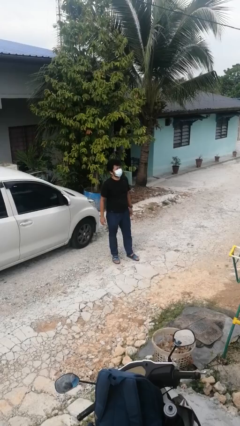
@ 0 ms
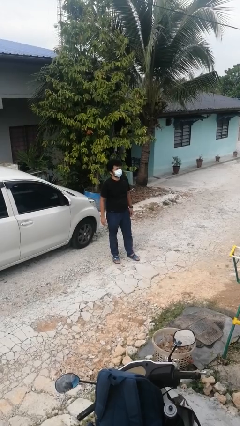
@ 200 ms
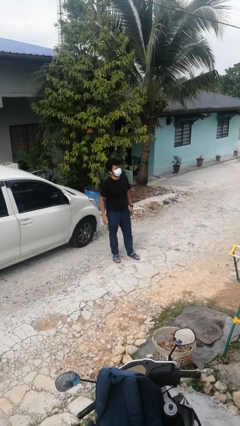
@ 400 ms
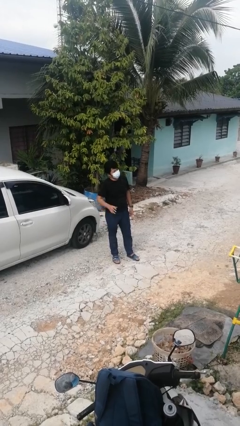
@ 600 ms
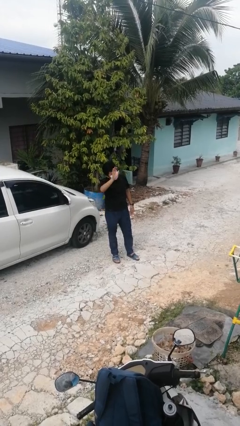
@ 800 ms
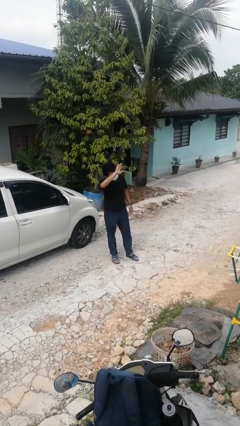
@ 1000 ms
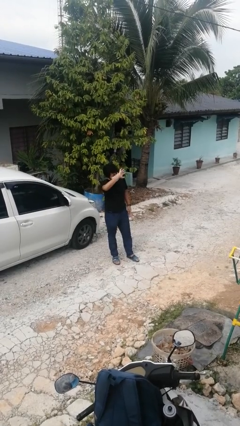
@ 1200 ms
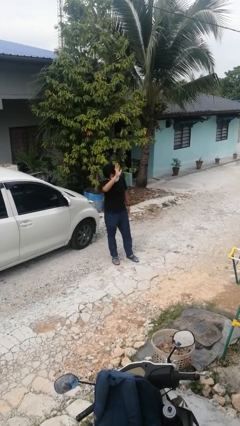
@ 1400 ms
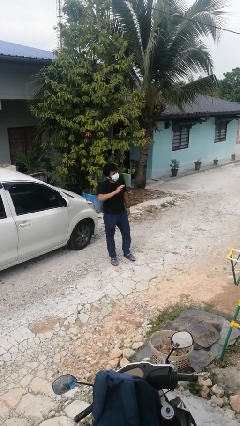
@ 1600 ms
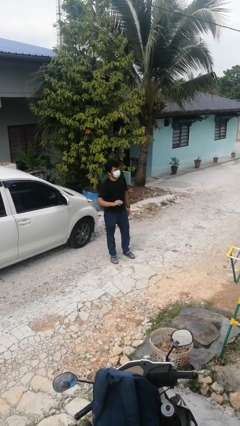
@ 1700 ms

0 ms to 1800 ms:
person waves at person

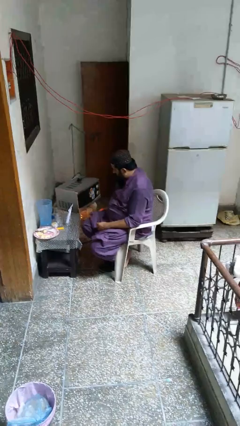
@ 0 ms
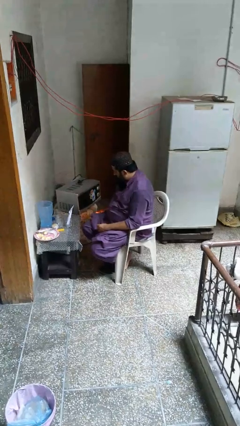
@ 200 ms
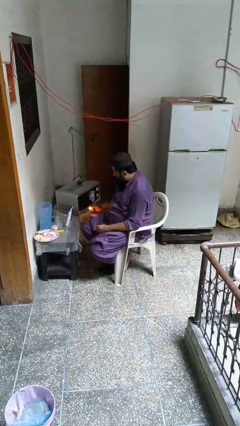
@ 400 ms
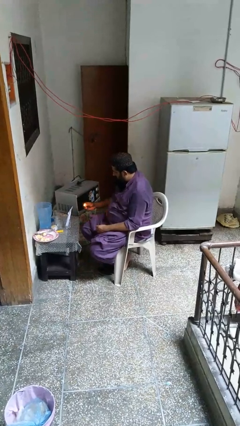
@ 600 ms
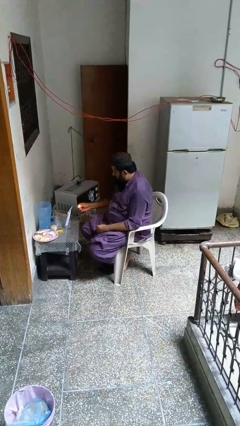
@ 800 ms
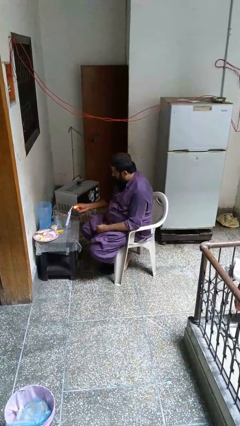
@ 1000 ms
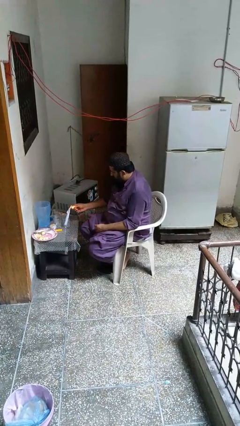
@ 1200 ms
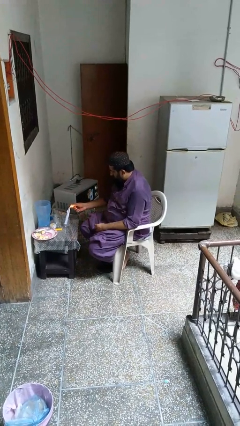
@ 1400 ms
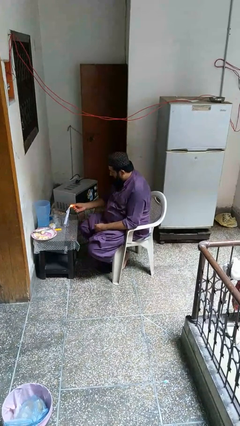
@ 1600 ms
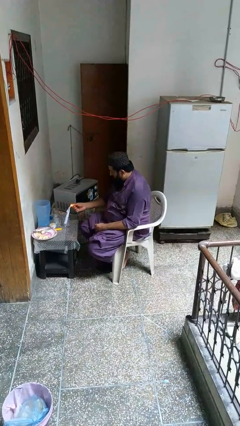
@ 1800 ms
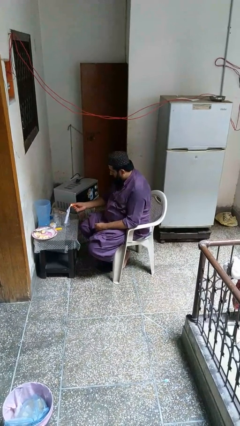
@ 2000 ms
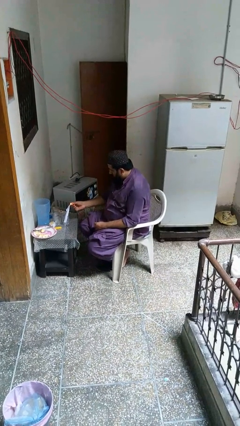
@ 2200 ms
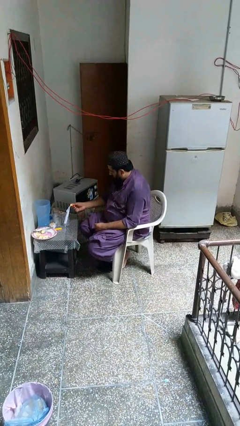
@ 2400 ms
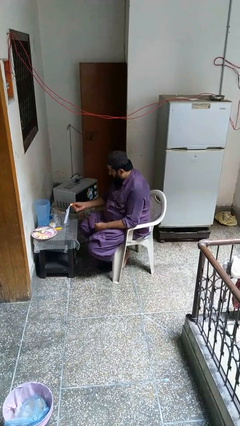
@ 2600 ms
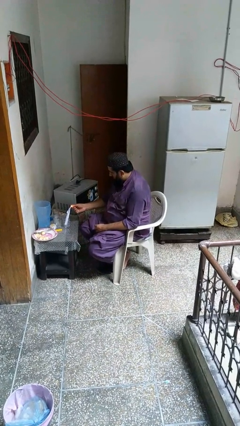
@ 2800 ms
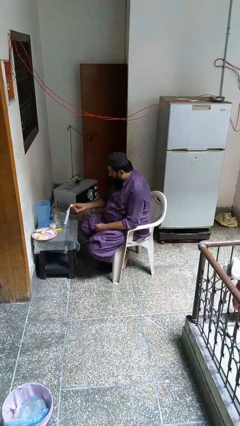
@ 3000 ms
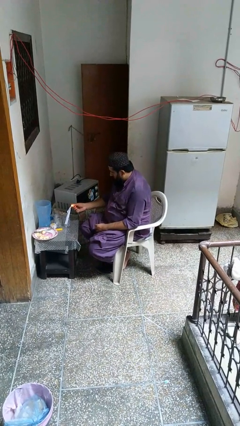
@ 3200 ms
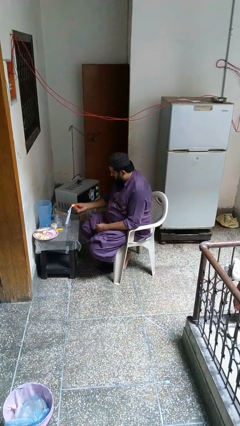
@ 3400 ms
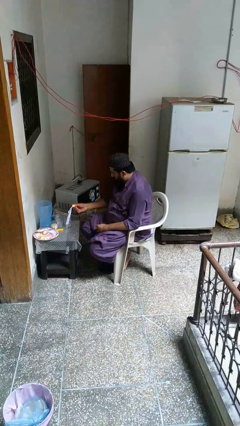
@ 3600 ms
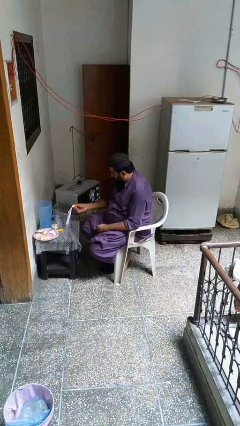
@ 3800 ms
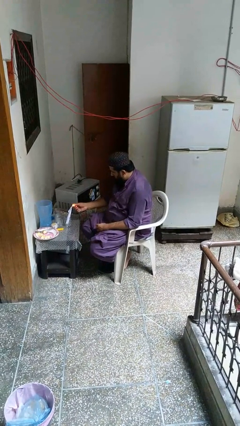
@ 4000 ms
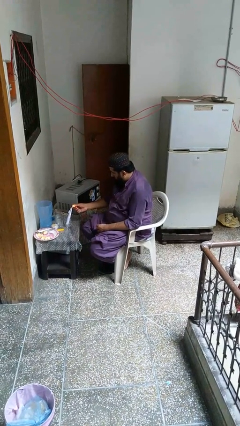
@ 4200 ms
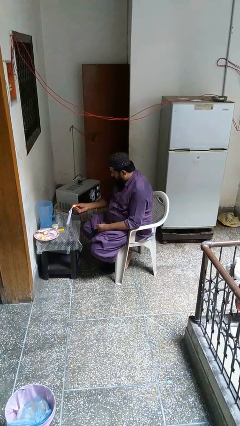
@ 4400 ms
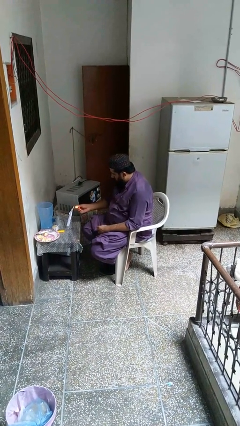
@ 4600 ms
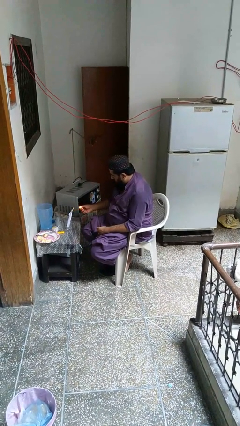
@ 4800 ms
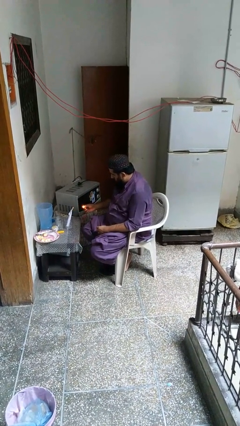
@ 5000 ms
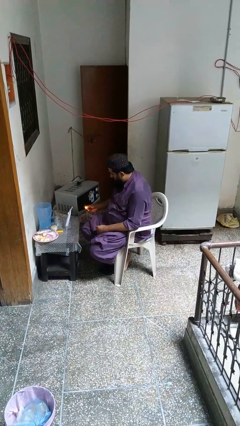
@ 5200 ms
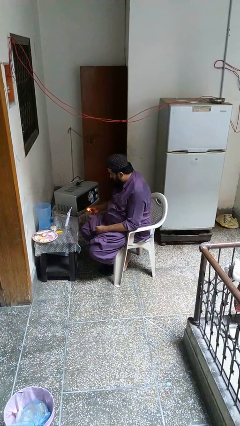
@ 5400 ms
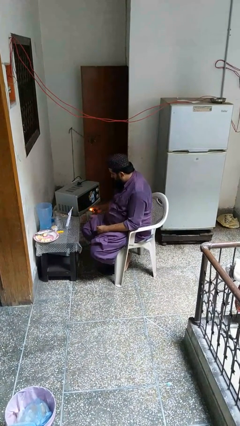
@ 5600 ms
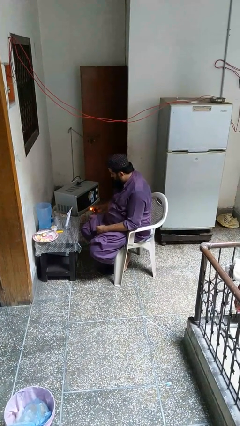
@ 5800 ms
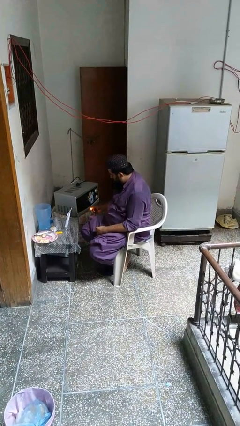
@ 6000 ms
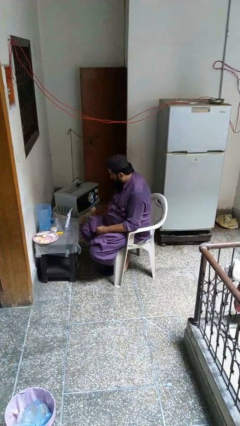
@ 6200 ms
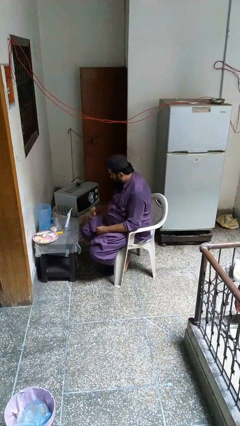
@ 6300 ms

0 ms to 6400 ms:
person lights candle

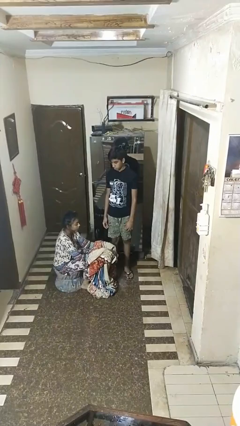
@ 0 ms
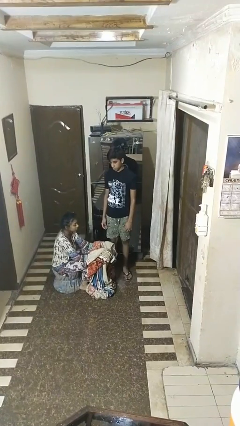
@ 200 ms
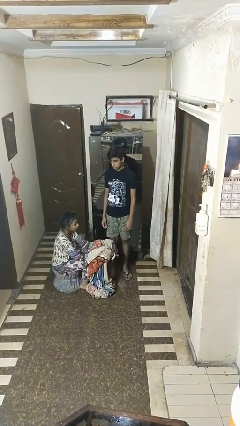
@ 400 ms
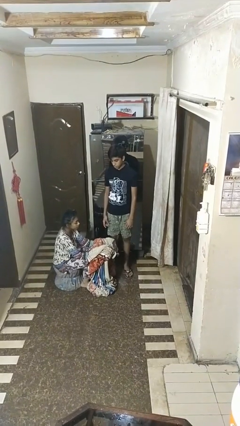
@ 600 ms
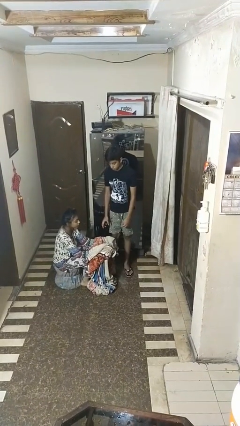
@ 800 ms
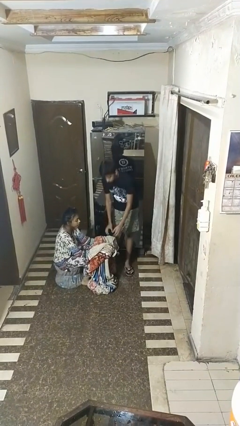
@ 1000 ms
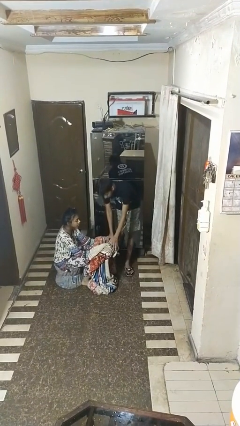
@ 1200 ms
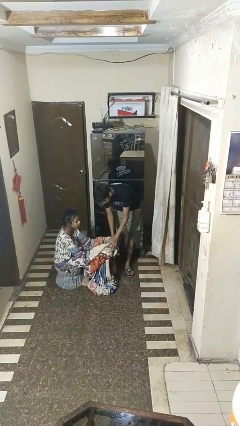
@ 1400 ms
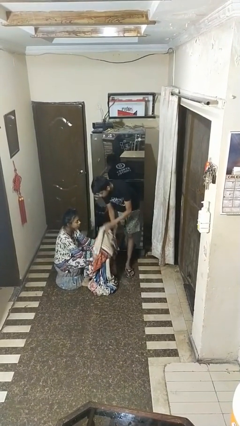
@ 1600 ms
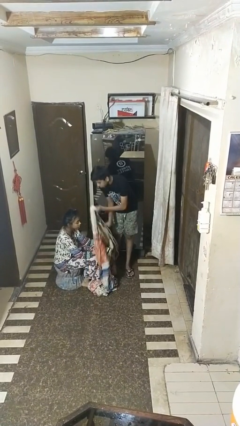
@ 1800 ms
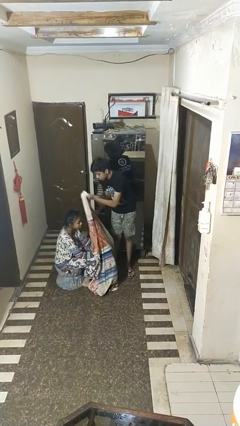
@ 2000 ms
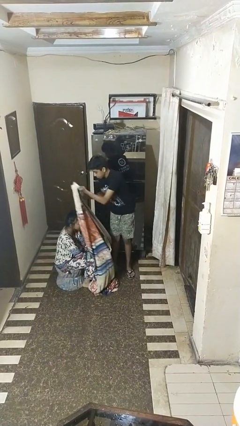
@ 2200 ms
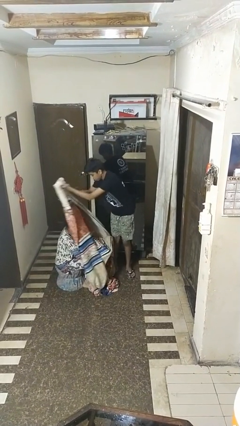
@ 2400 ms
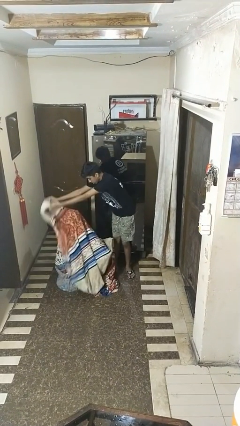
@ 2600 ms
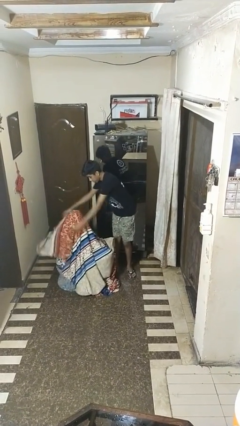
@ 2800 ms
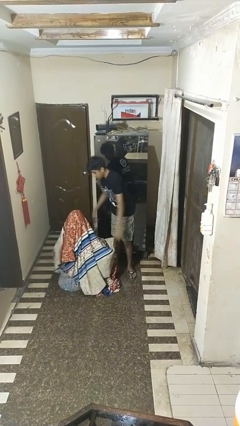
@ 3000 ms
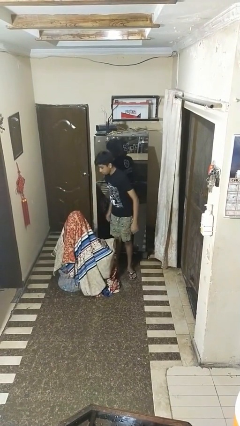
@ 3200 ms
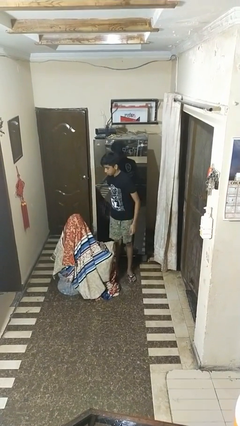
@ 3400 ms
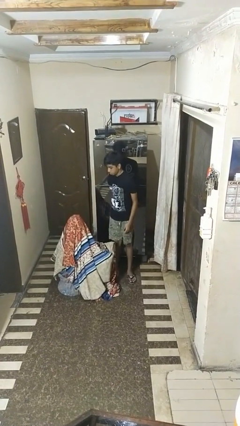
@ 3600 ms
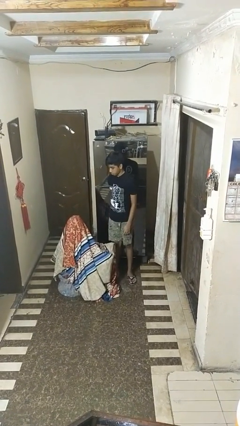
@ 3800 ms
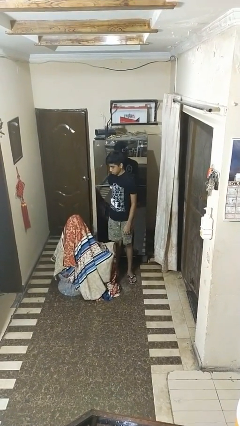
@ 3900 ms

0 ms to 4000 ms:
person covers friend with blanket

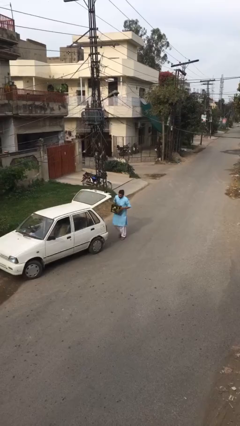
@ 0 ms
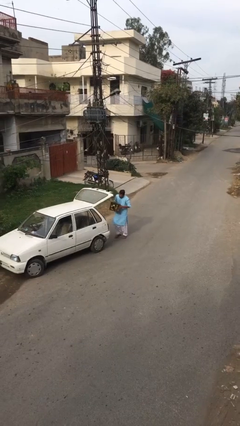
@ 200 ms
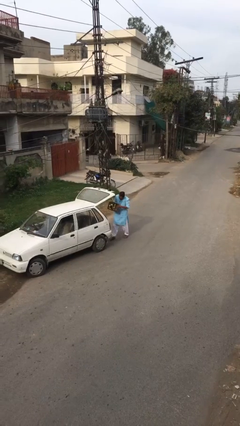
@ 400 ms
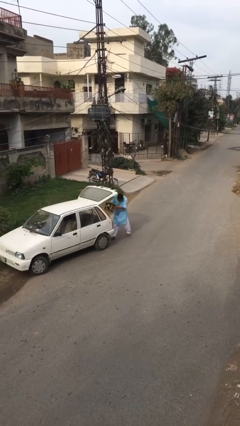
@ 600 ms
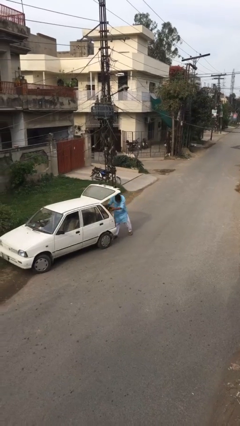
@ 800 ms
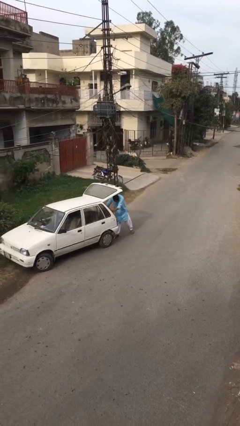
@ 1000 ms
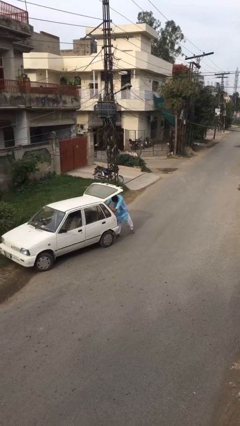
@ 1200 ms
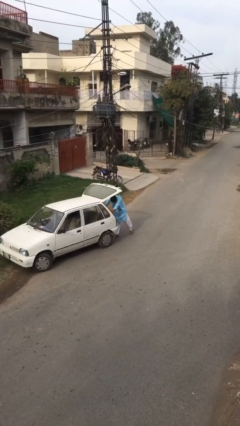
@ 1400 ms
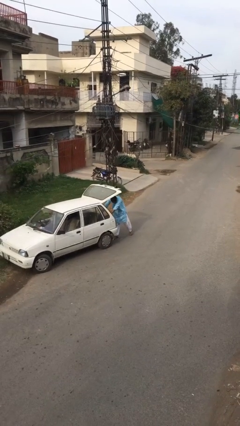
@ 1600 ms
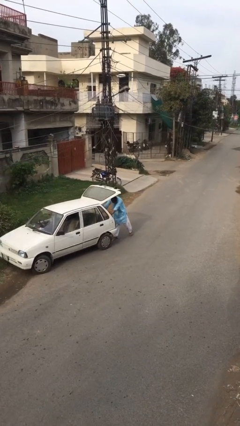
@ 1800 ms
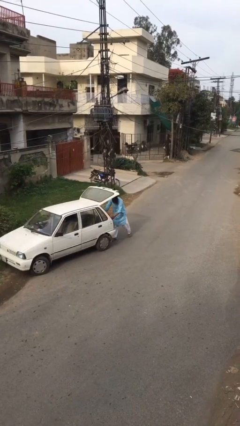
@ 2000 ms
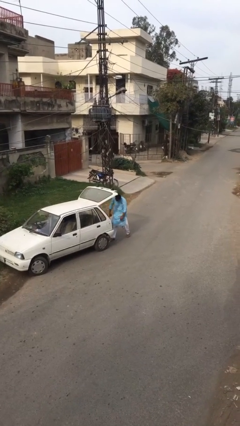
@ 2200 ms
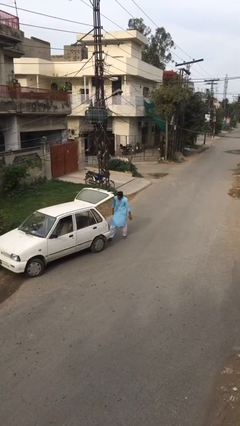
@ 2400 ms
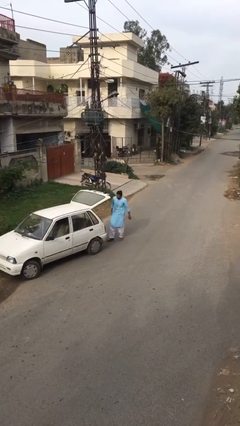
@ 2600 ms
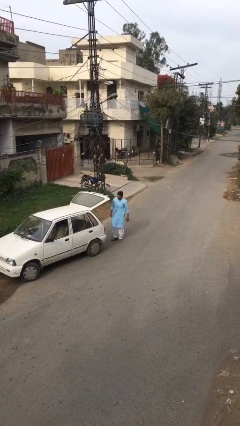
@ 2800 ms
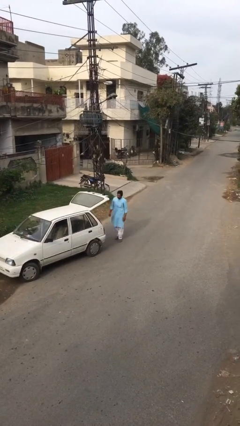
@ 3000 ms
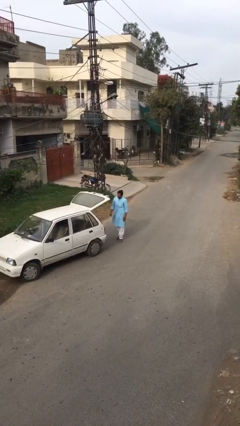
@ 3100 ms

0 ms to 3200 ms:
person loads car

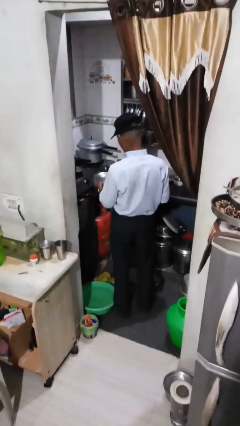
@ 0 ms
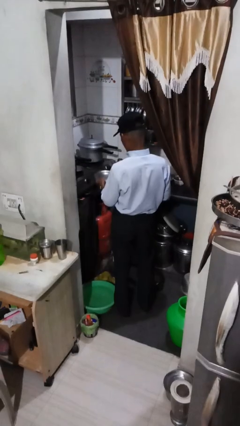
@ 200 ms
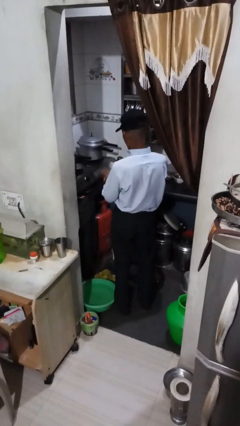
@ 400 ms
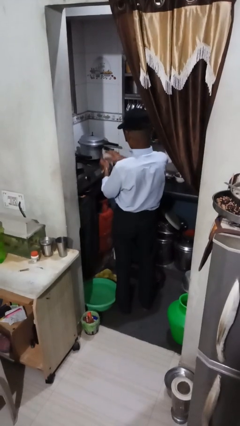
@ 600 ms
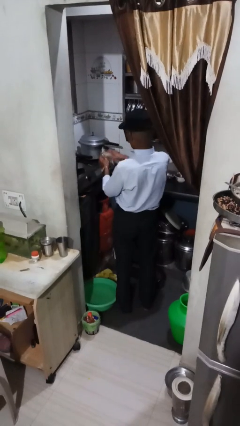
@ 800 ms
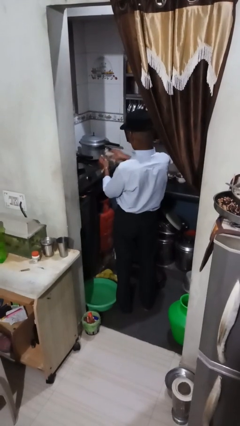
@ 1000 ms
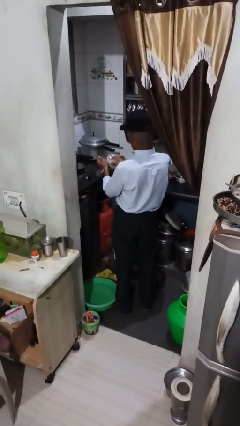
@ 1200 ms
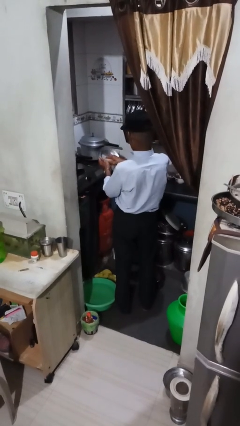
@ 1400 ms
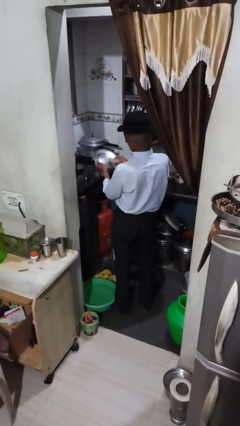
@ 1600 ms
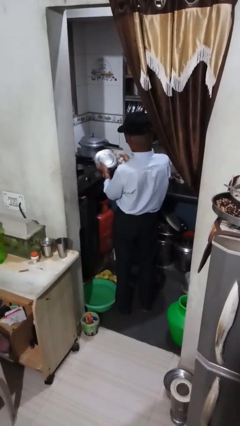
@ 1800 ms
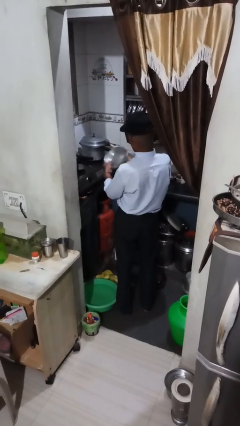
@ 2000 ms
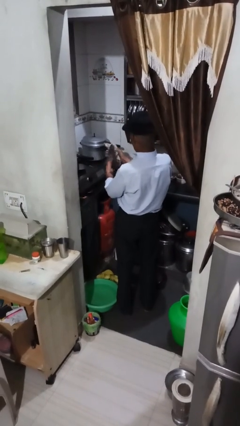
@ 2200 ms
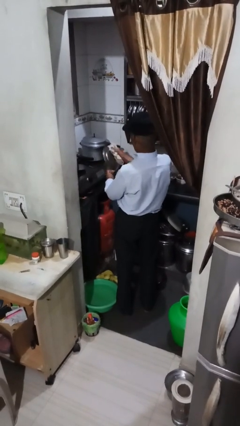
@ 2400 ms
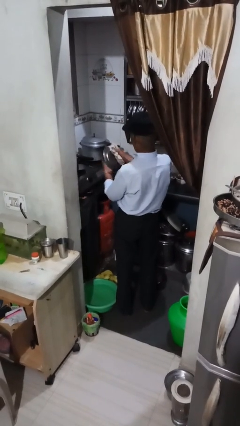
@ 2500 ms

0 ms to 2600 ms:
person dries dish
